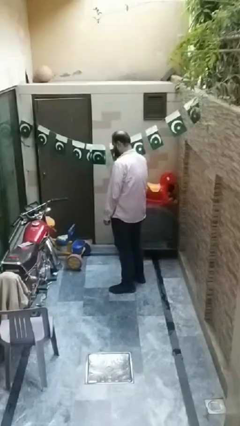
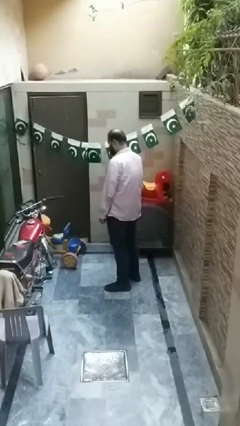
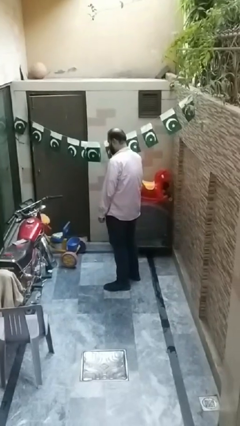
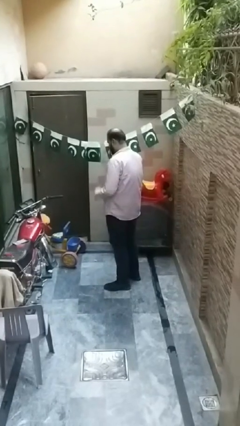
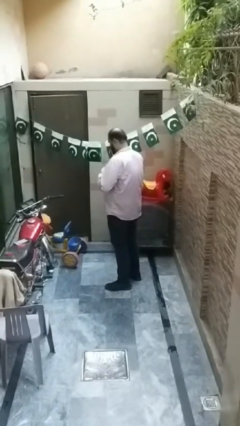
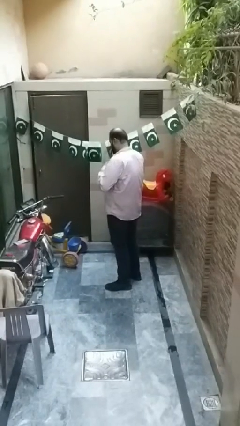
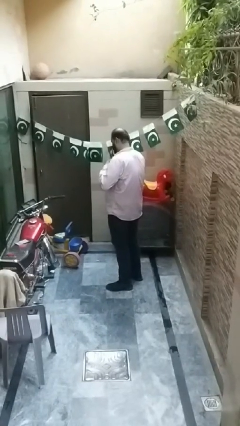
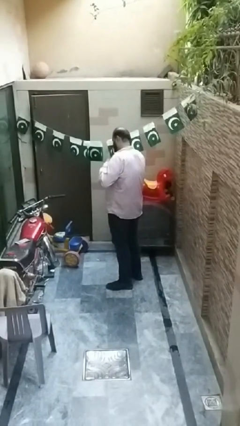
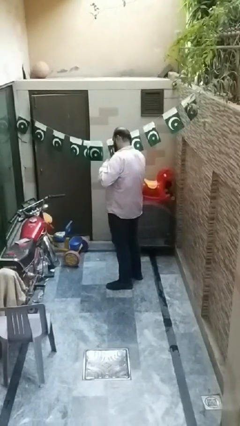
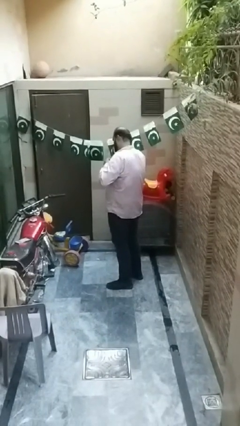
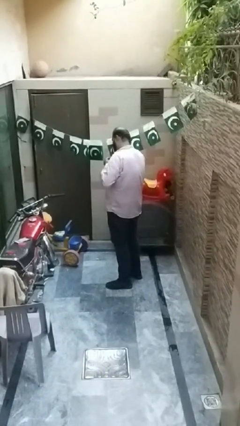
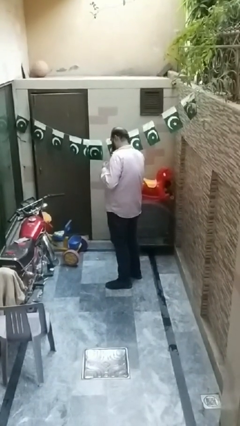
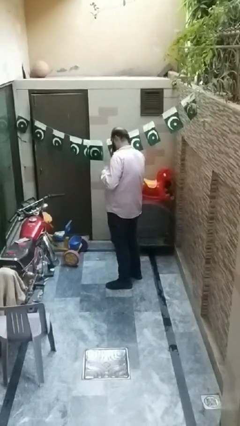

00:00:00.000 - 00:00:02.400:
person unbuttons shirt

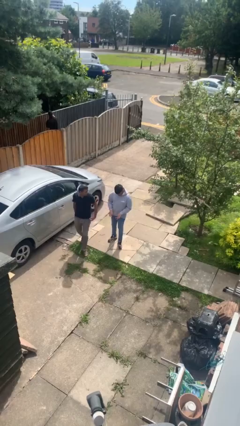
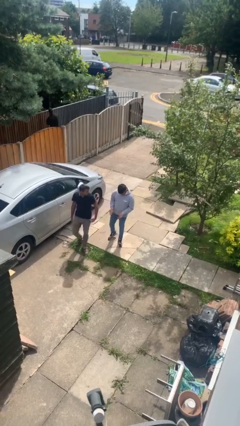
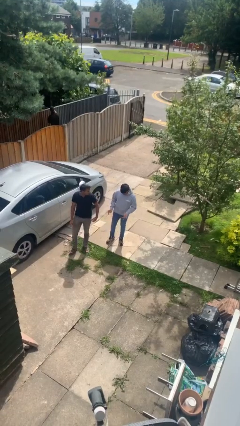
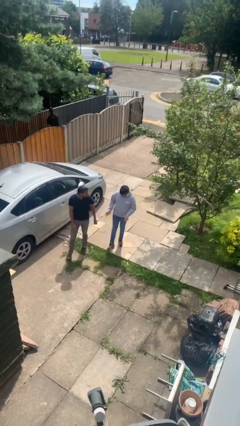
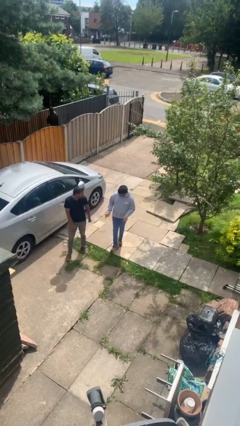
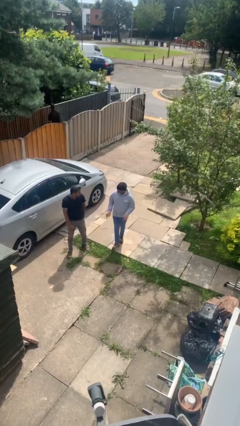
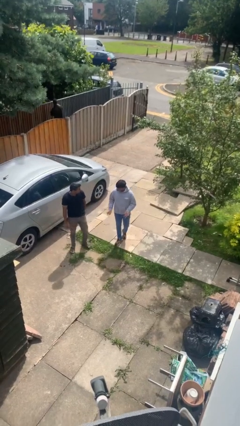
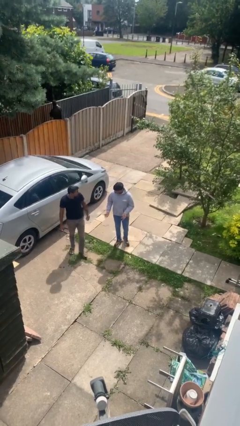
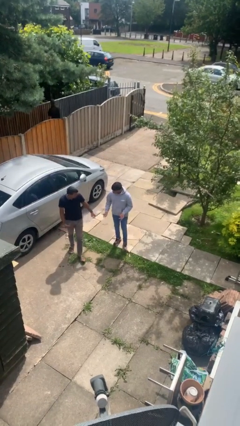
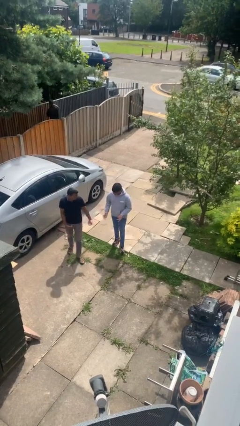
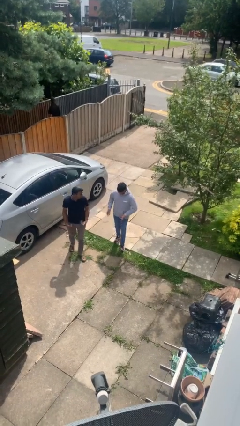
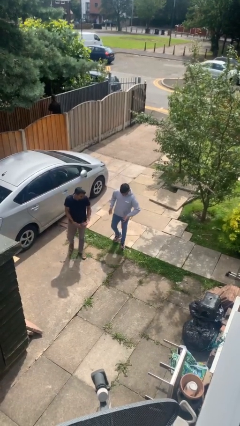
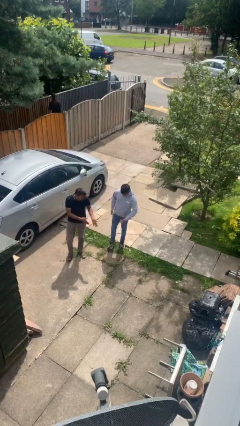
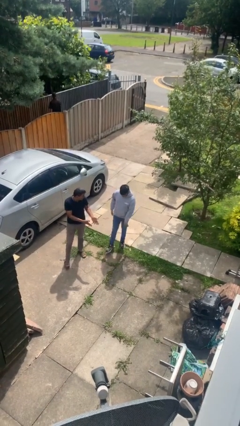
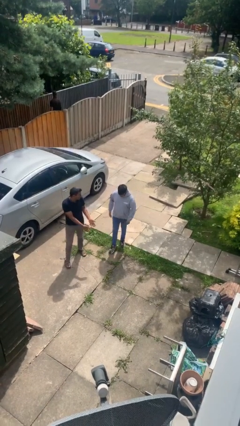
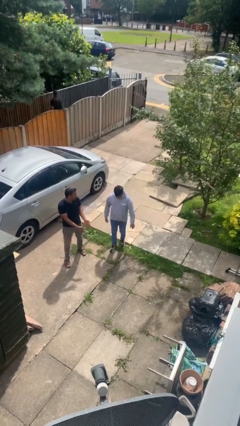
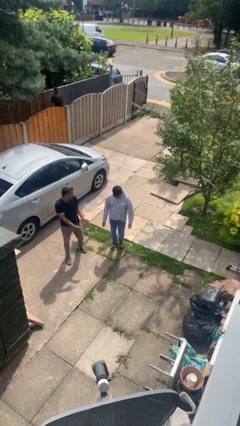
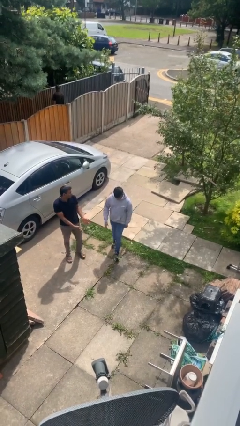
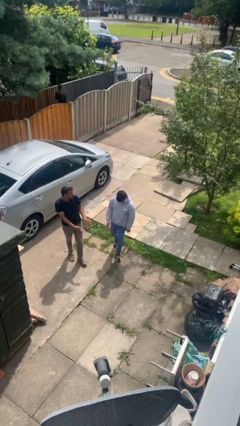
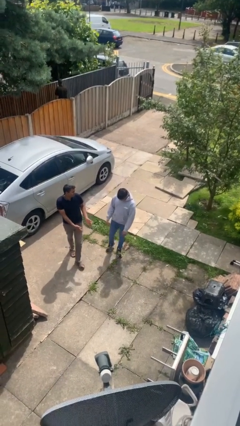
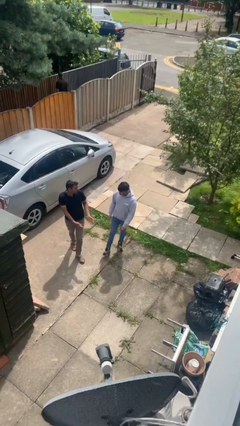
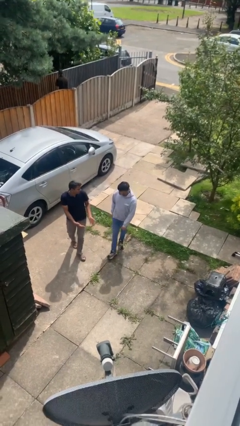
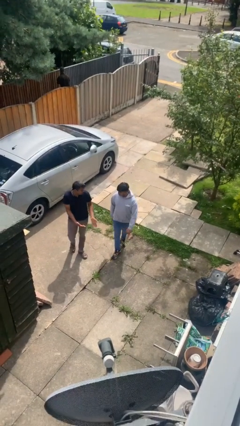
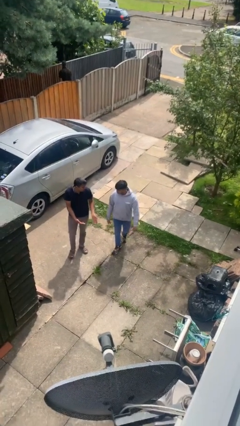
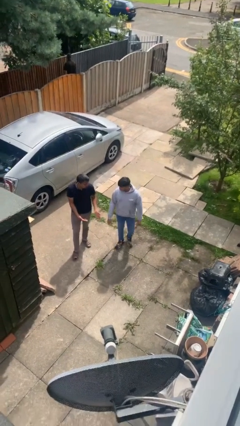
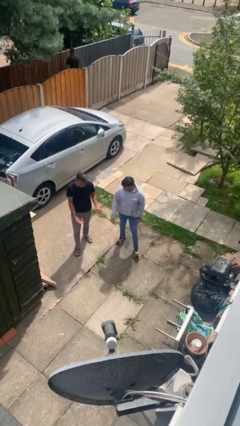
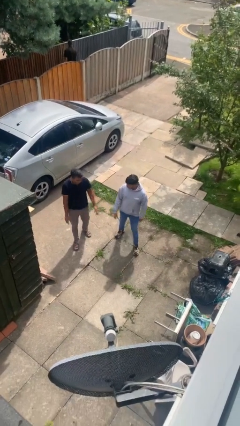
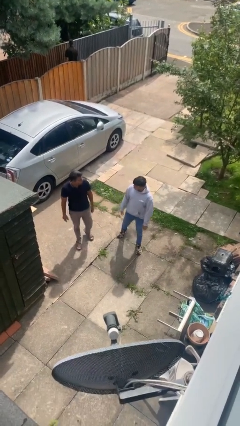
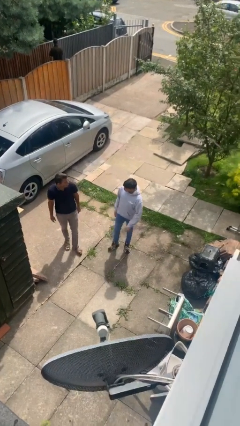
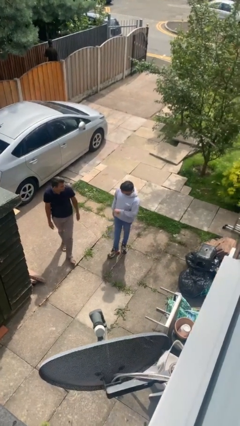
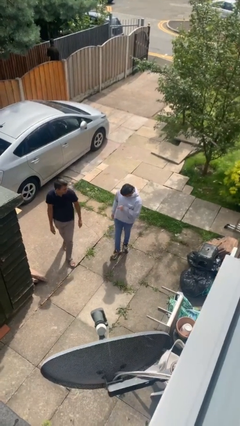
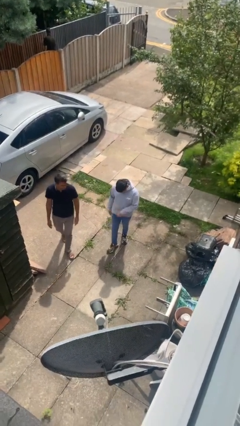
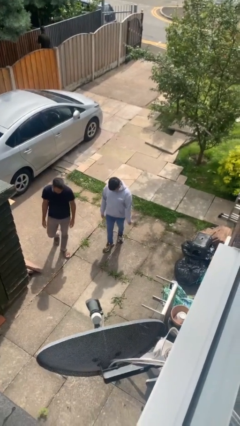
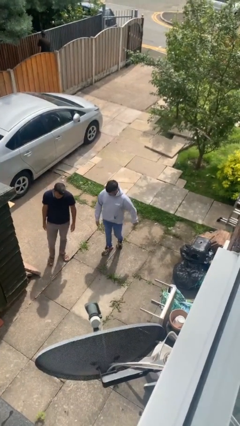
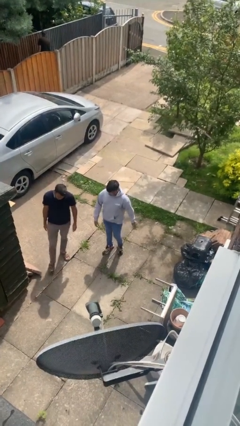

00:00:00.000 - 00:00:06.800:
person talks to person

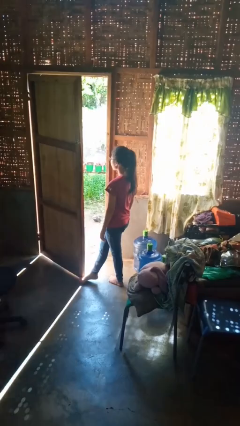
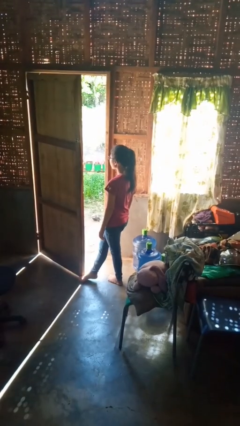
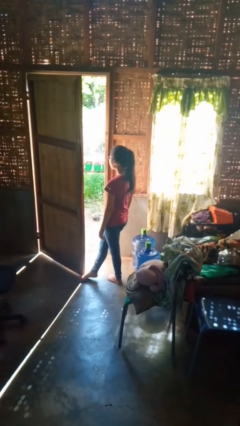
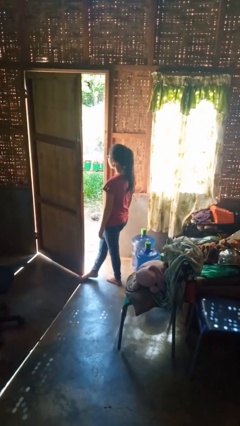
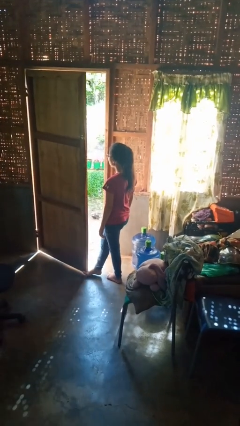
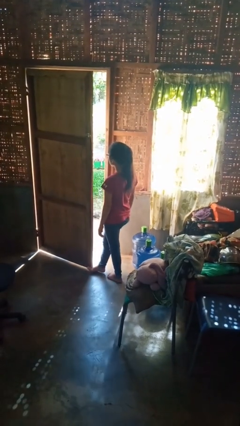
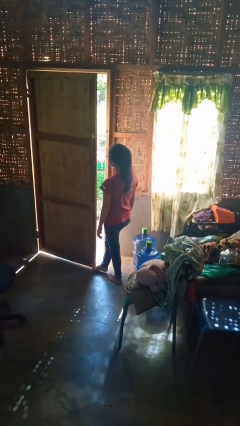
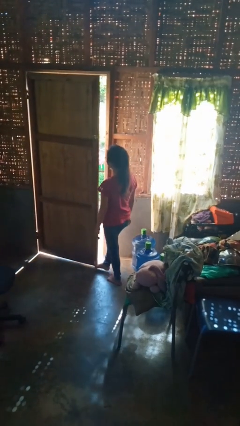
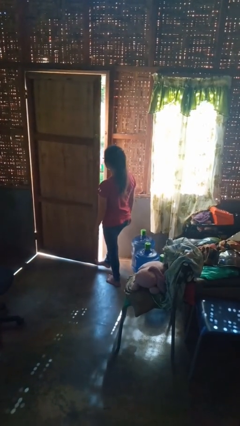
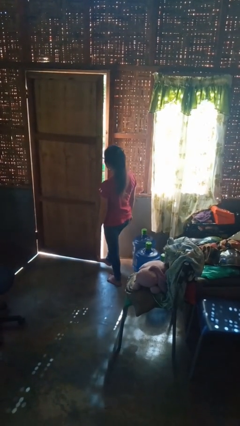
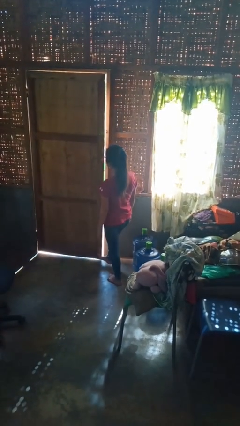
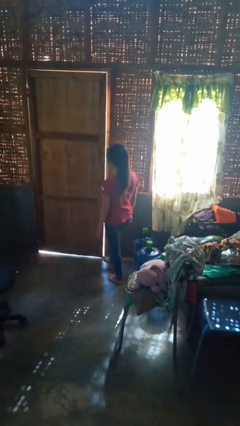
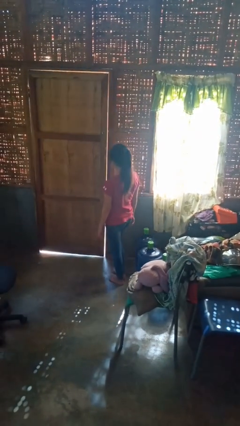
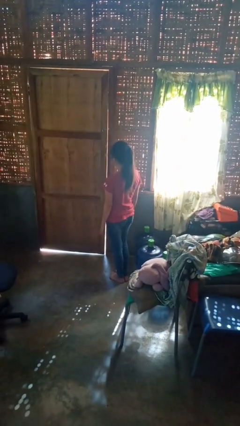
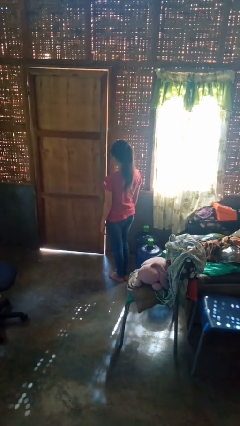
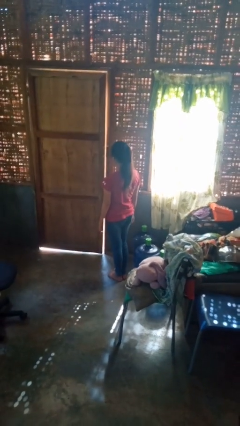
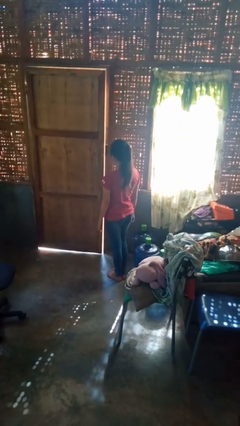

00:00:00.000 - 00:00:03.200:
person closes door with foot

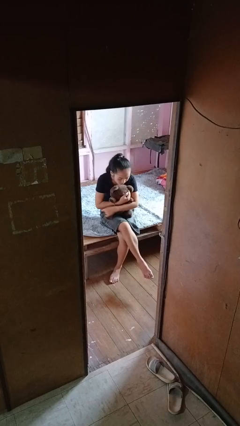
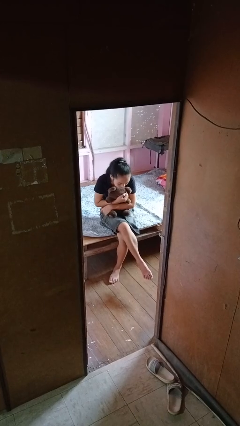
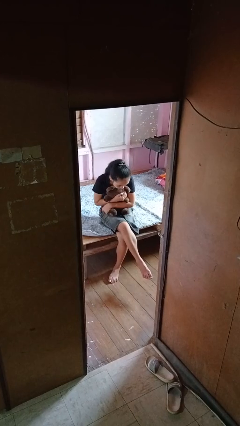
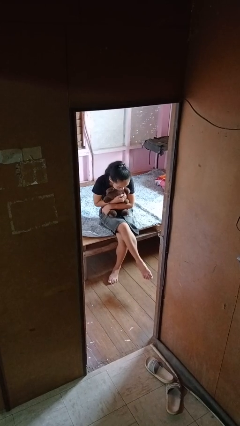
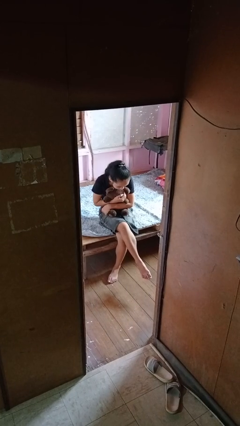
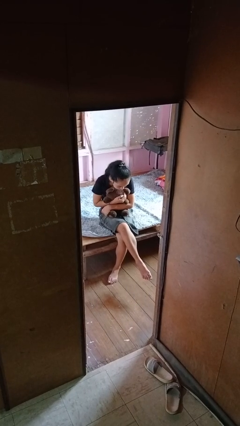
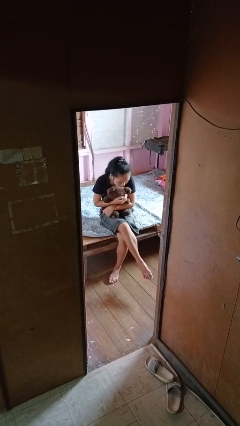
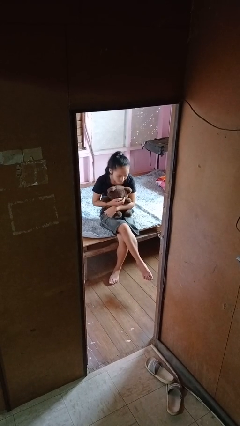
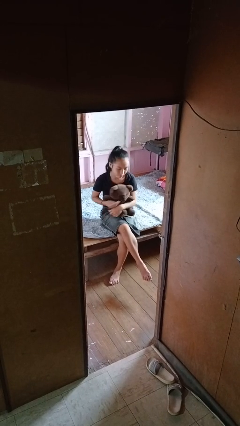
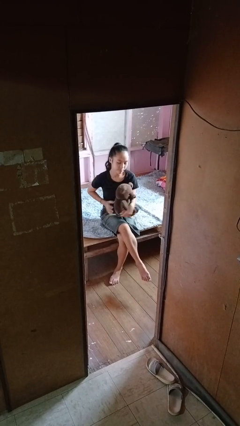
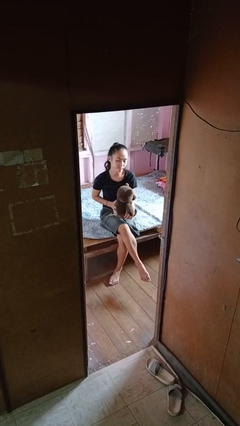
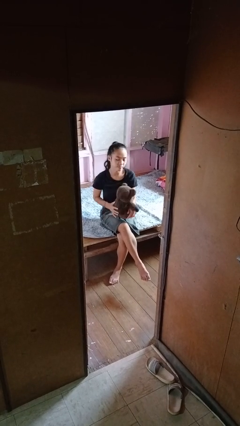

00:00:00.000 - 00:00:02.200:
person hugs stuffed animal

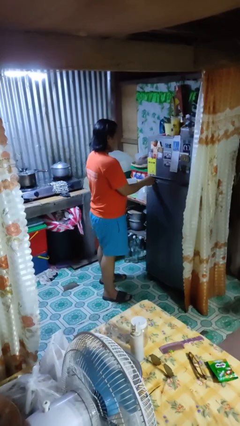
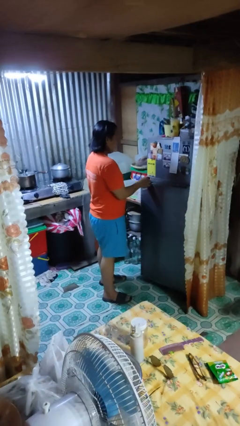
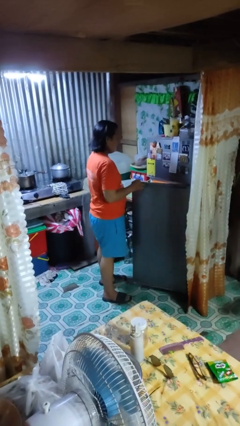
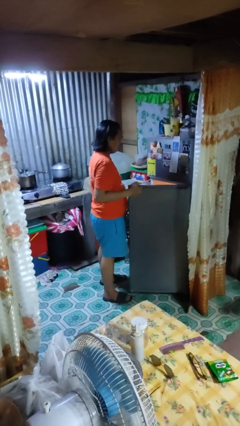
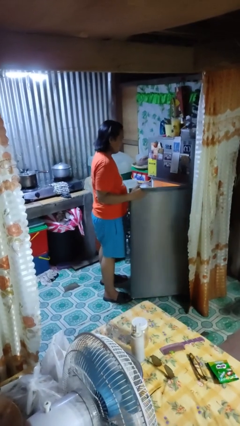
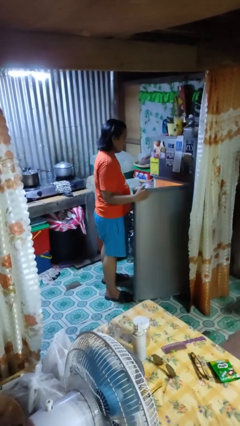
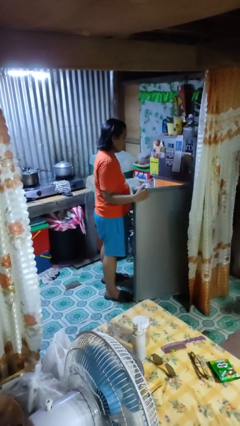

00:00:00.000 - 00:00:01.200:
person opens refrigerator

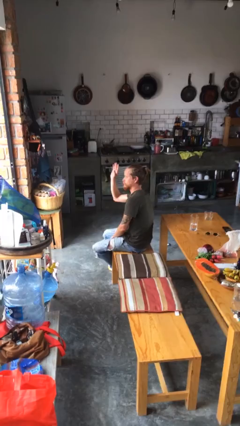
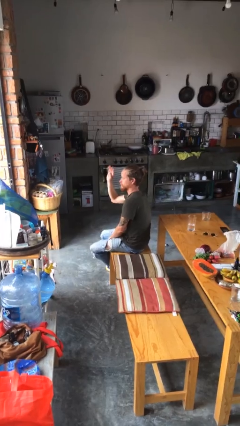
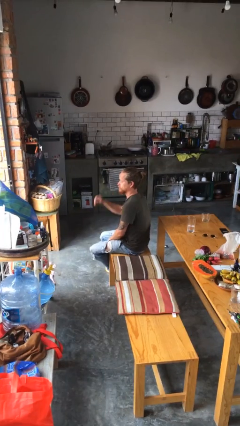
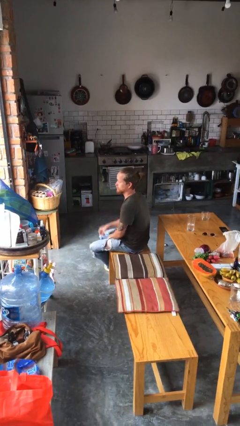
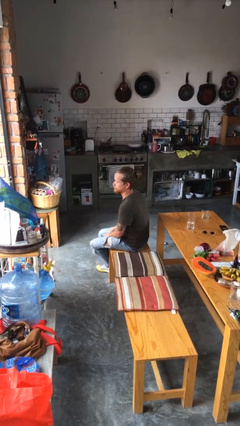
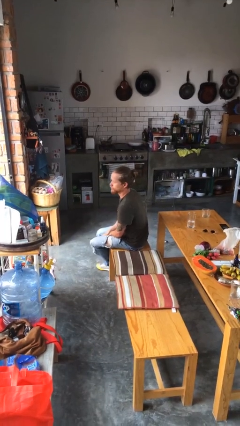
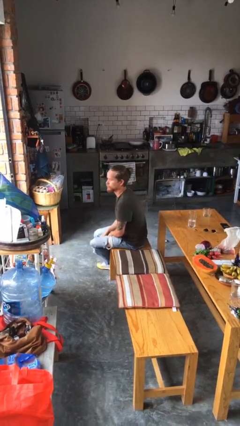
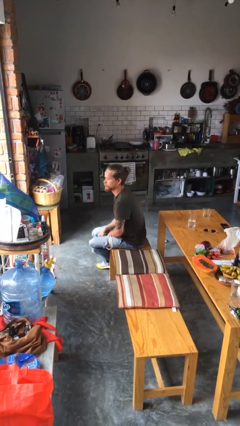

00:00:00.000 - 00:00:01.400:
person gestures lower hand

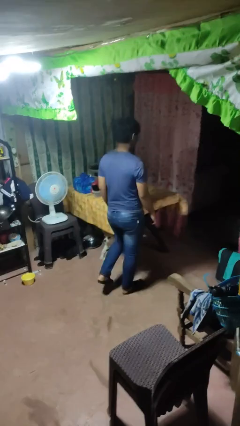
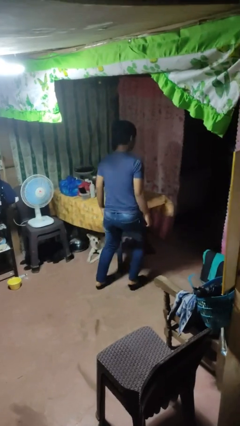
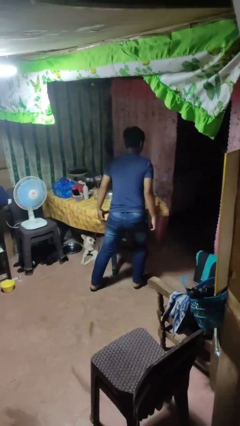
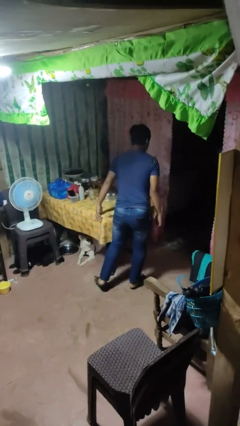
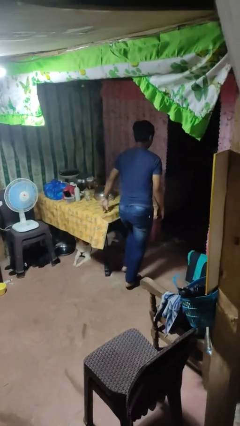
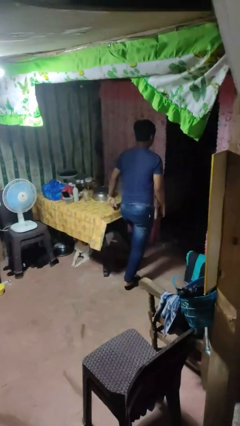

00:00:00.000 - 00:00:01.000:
person bumps into table
